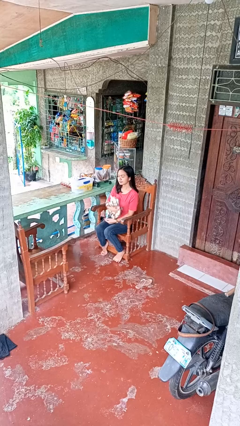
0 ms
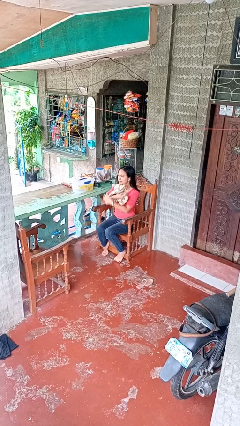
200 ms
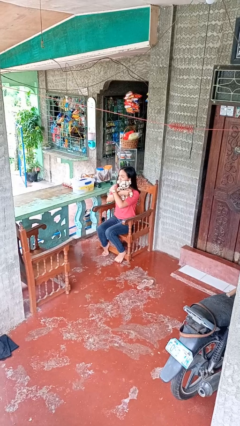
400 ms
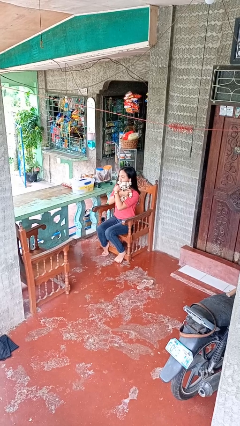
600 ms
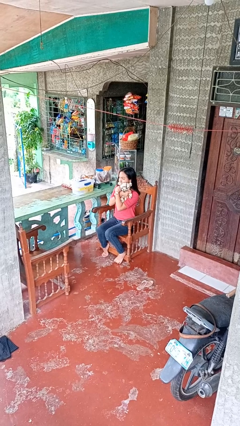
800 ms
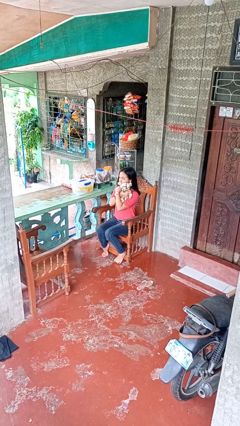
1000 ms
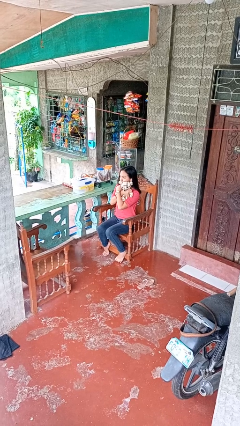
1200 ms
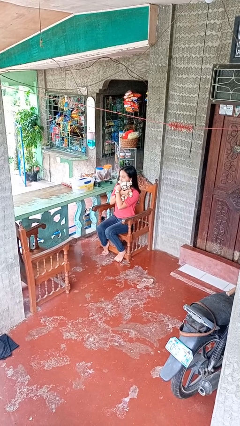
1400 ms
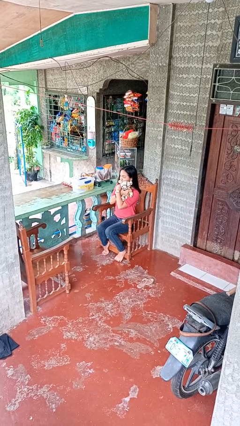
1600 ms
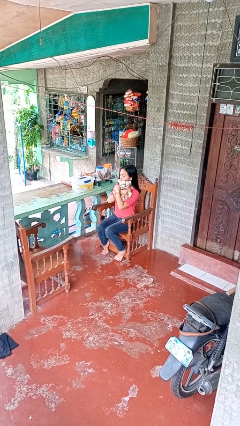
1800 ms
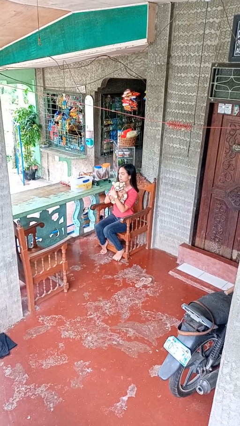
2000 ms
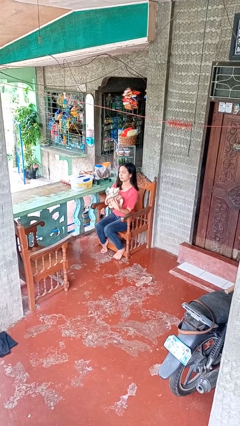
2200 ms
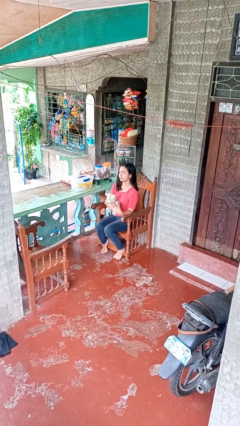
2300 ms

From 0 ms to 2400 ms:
person hugs stuffed animal

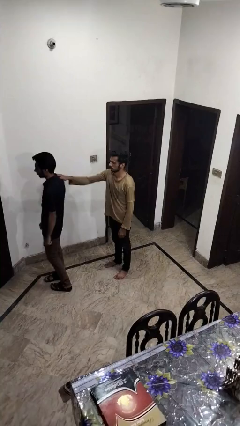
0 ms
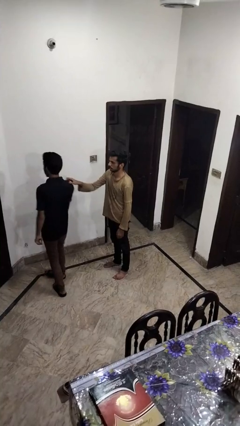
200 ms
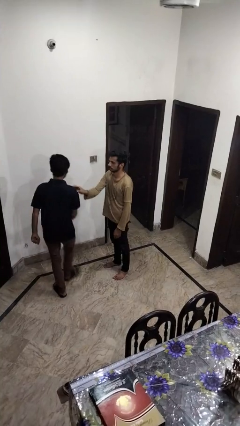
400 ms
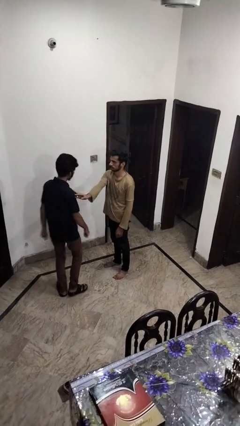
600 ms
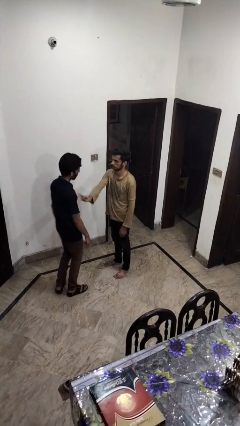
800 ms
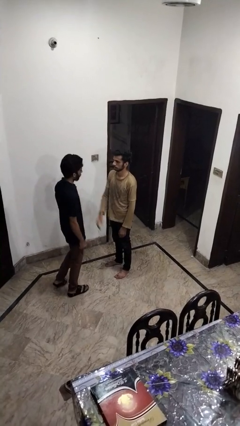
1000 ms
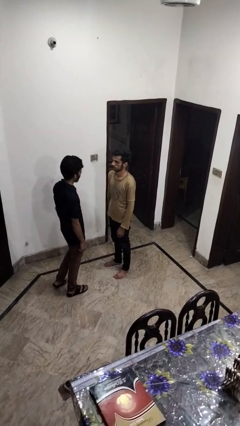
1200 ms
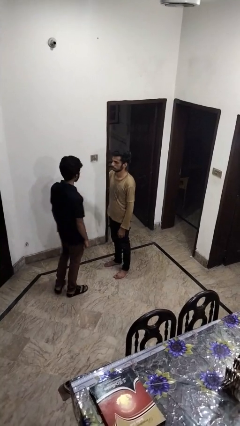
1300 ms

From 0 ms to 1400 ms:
person spins person around

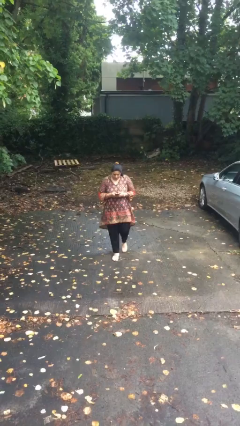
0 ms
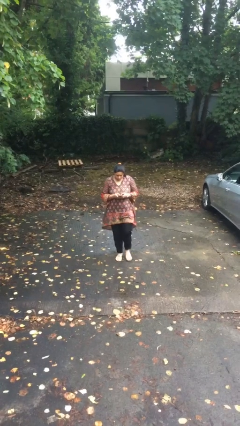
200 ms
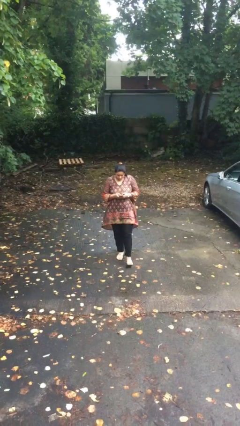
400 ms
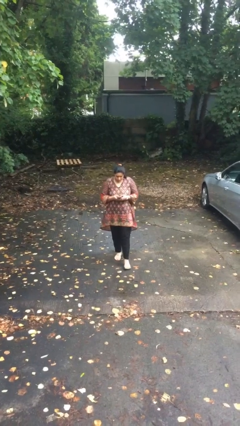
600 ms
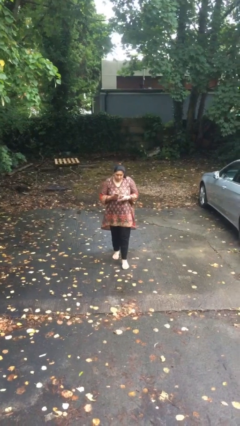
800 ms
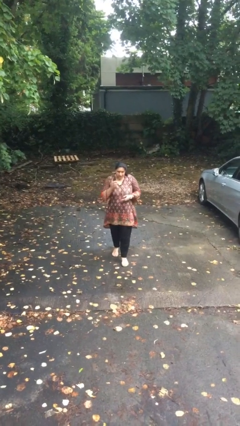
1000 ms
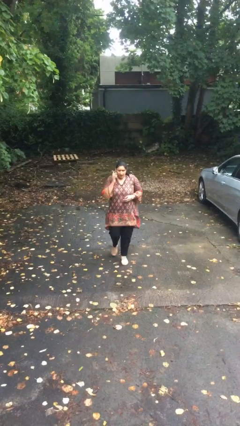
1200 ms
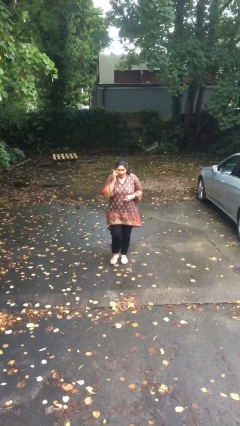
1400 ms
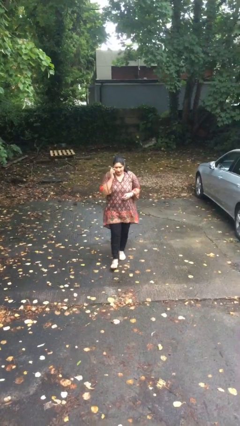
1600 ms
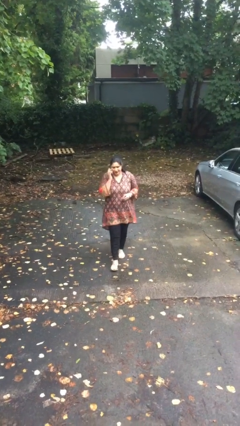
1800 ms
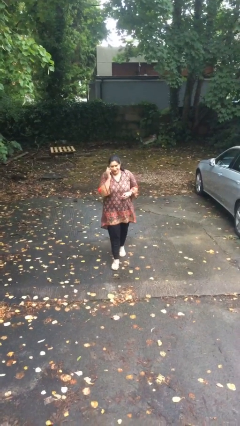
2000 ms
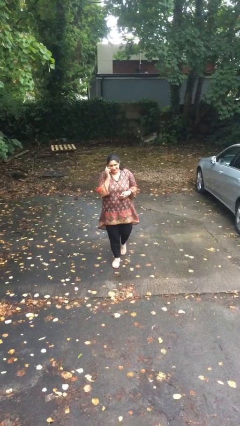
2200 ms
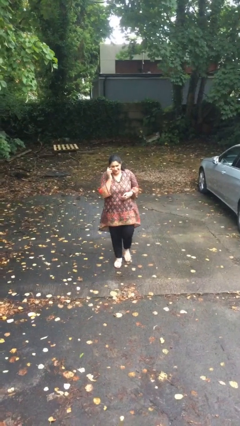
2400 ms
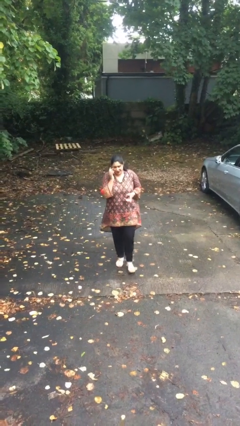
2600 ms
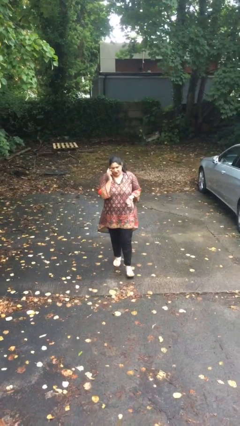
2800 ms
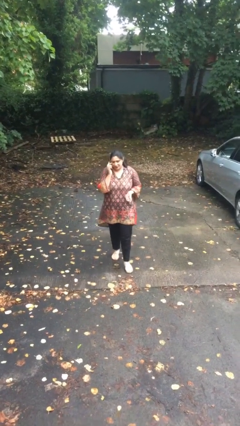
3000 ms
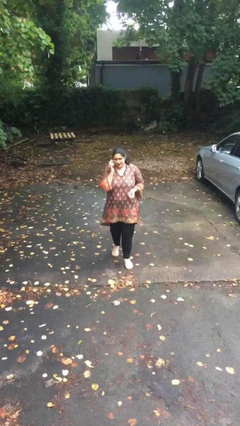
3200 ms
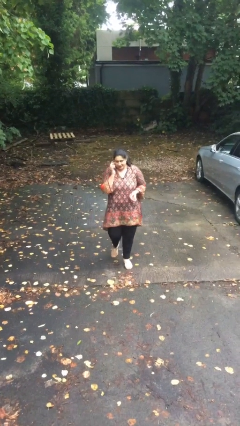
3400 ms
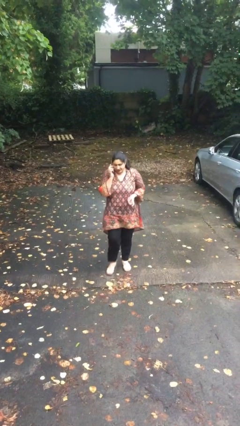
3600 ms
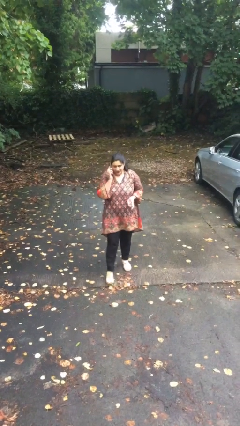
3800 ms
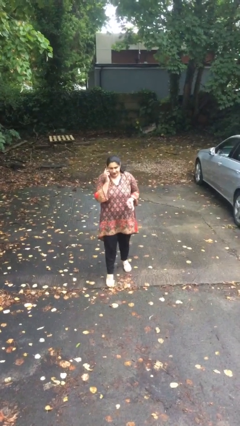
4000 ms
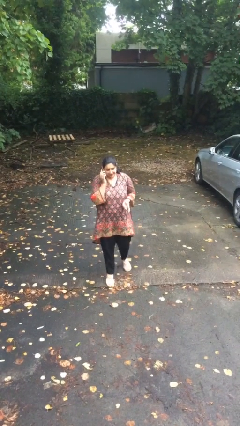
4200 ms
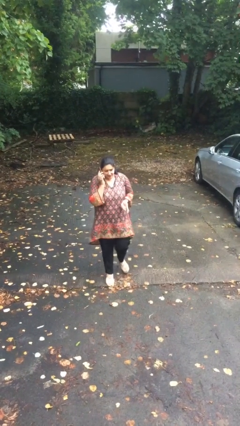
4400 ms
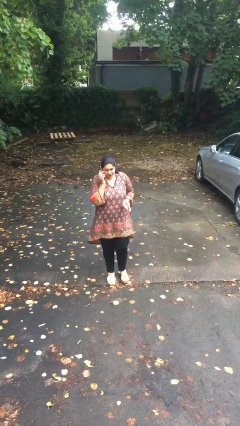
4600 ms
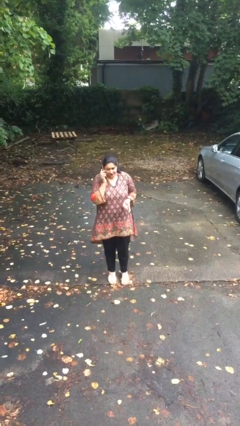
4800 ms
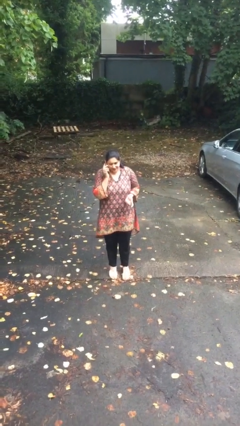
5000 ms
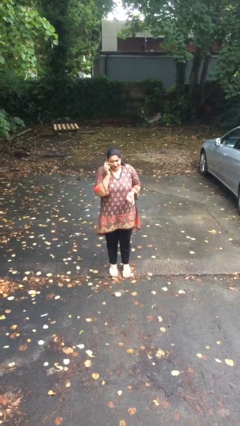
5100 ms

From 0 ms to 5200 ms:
person talks on phone

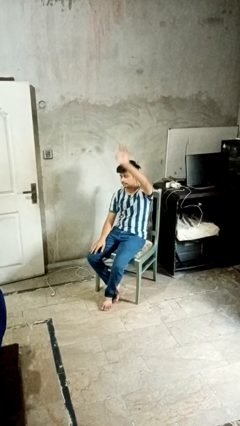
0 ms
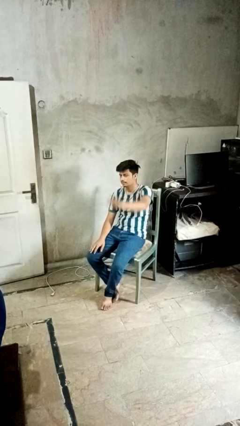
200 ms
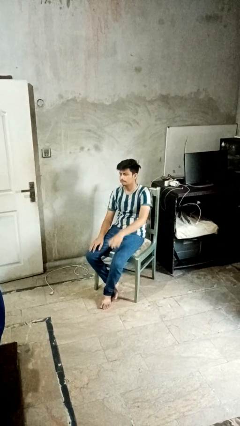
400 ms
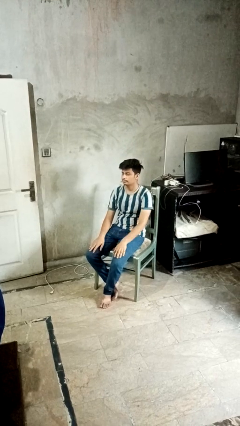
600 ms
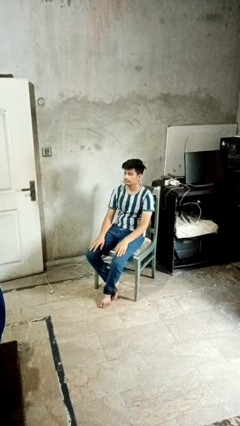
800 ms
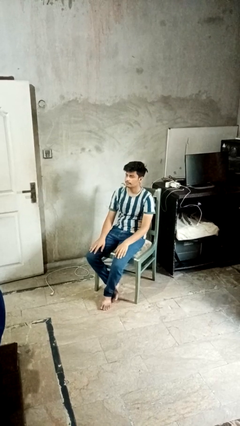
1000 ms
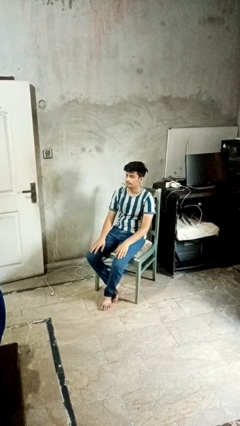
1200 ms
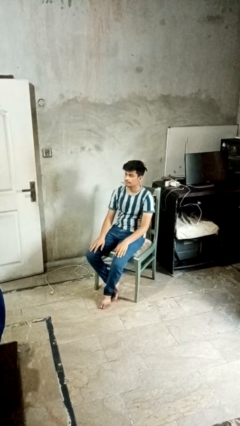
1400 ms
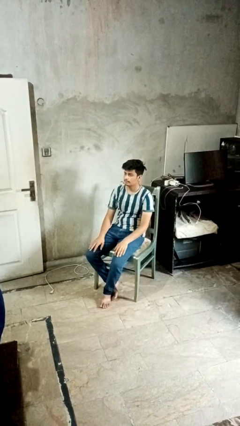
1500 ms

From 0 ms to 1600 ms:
person gestures lower hand

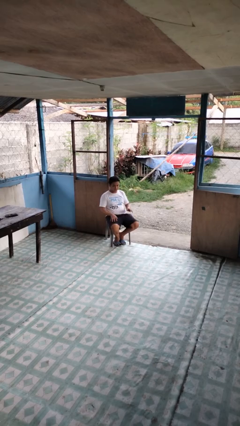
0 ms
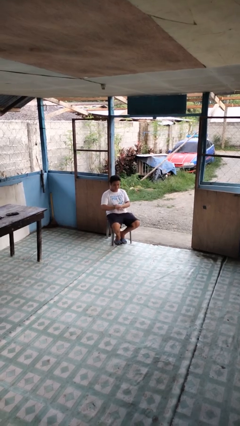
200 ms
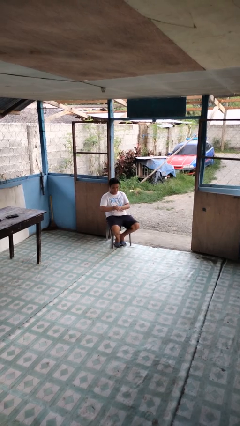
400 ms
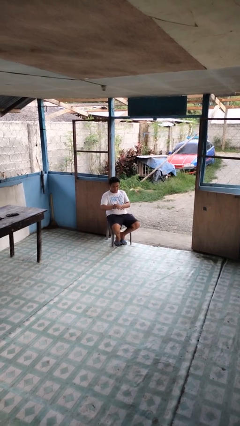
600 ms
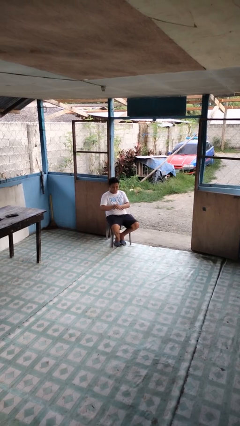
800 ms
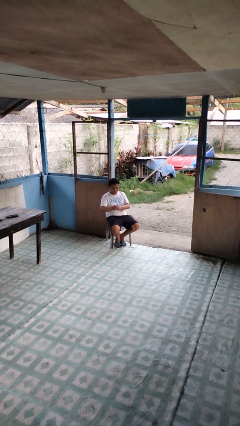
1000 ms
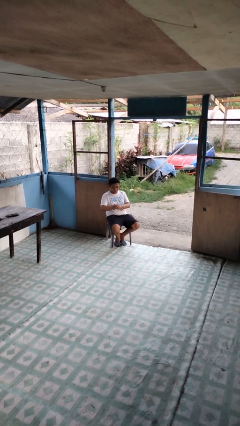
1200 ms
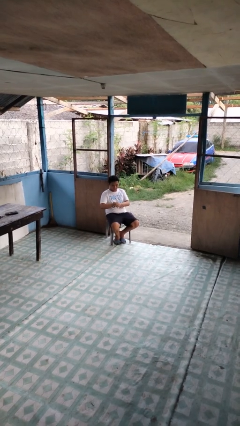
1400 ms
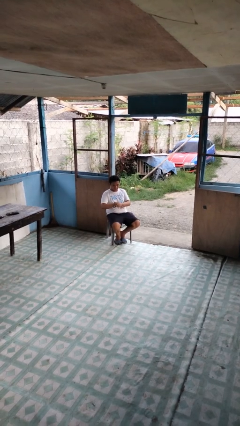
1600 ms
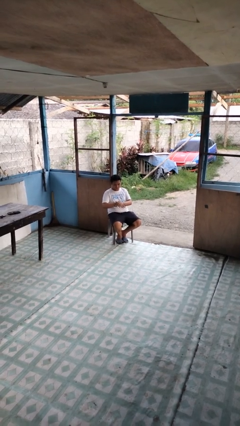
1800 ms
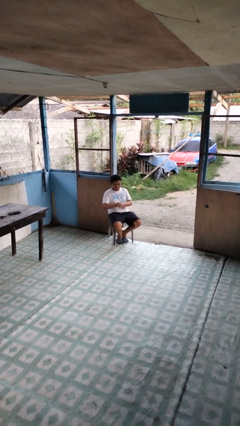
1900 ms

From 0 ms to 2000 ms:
person swats bug

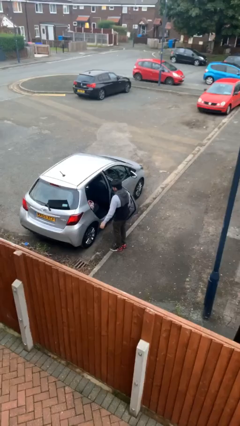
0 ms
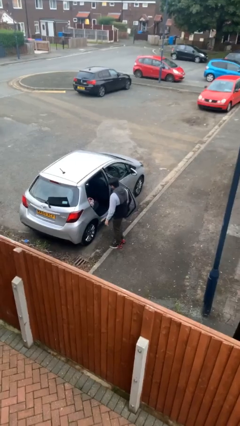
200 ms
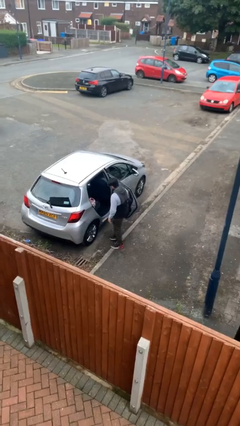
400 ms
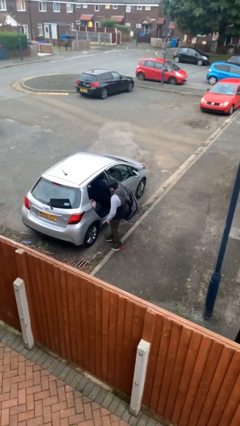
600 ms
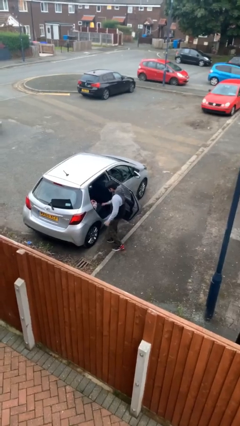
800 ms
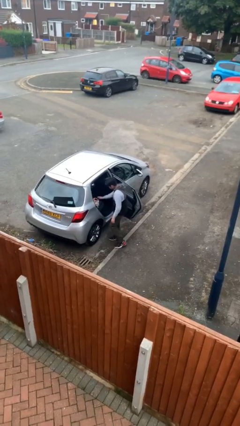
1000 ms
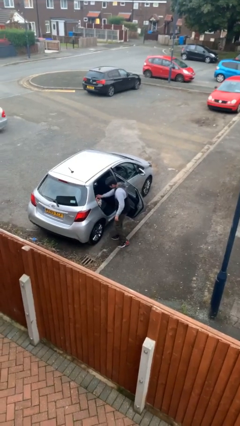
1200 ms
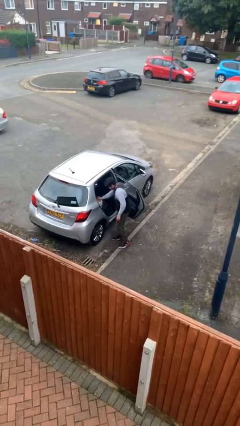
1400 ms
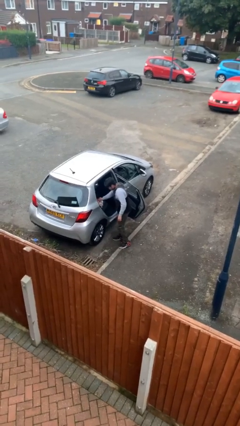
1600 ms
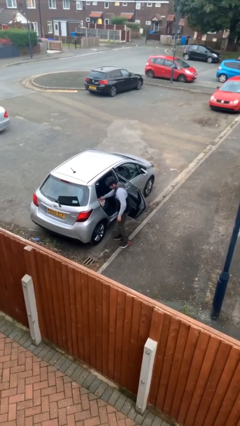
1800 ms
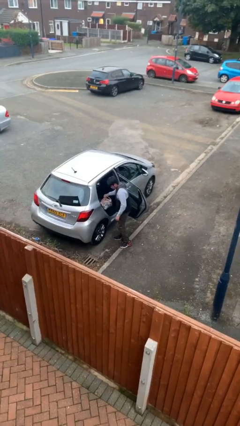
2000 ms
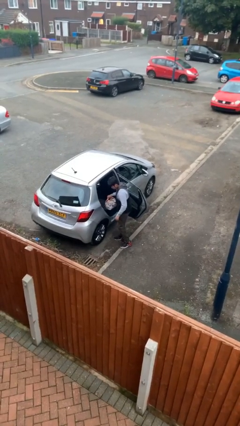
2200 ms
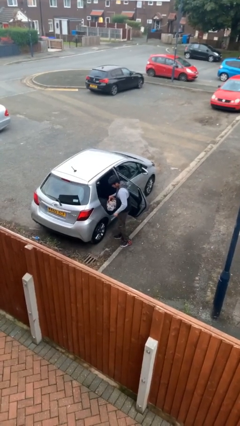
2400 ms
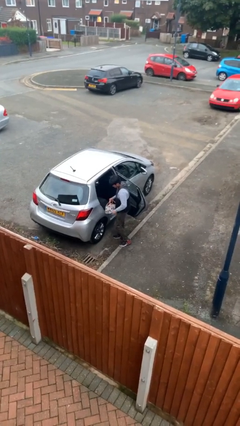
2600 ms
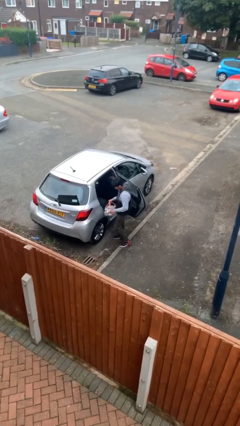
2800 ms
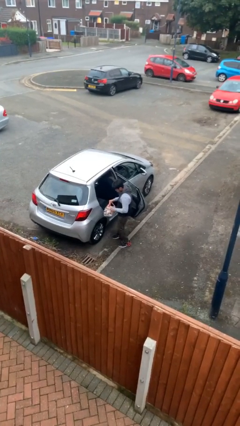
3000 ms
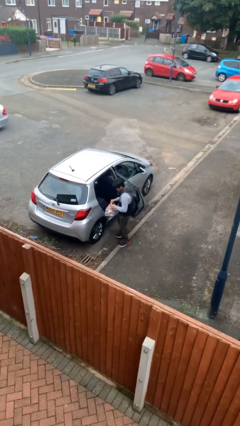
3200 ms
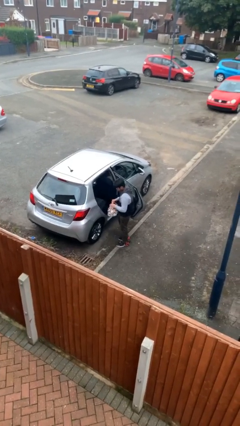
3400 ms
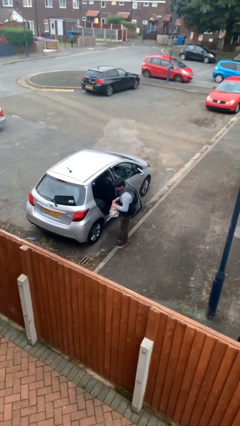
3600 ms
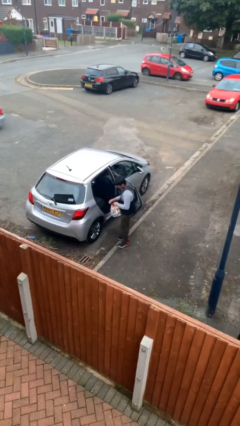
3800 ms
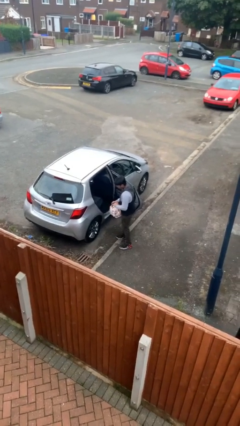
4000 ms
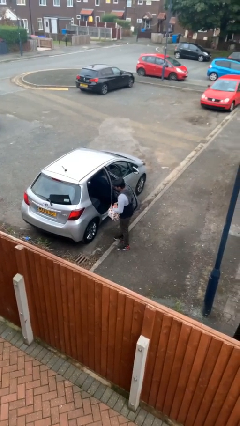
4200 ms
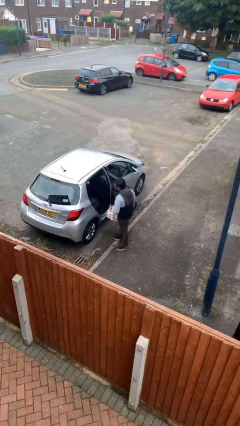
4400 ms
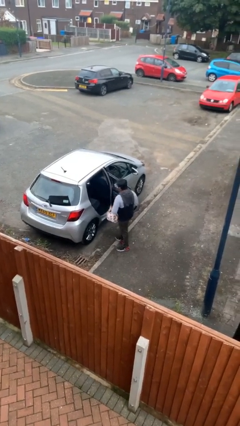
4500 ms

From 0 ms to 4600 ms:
person unloads car

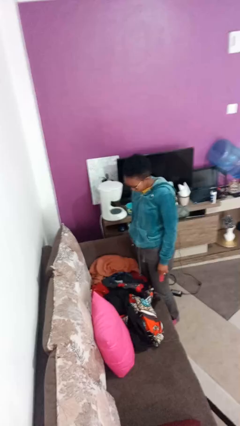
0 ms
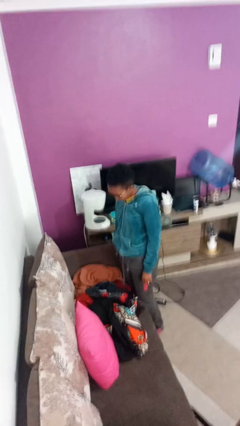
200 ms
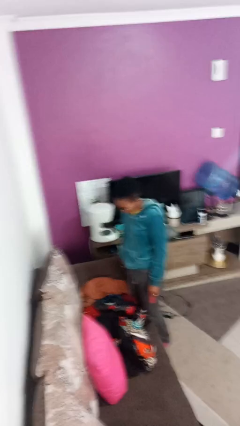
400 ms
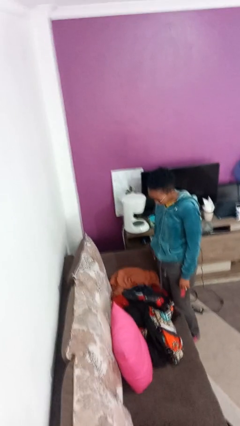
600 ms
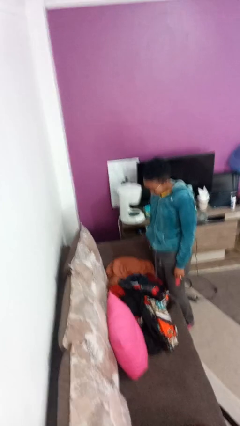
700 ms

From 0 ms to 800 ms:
person folds socks
